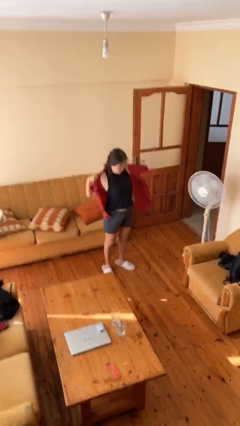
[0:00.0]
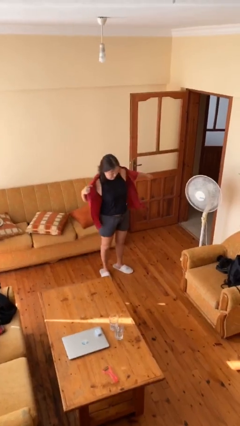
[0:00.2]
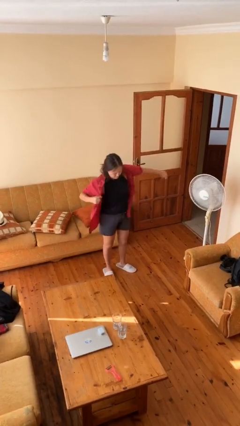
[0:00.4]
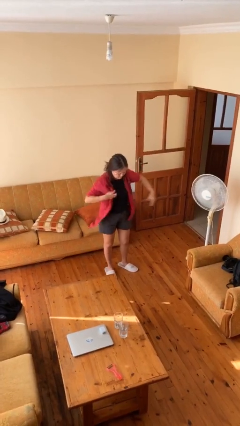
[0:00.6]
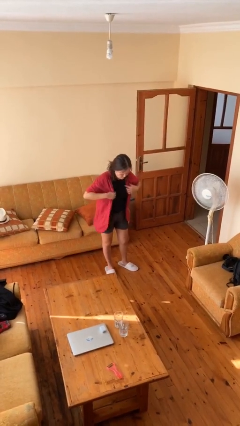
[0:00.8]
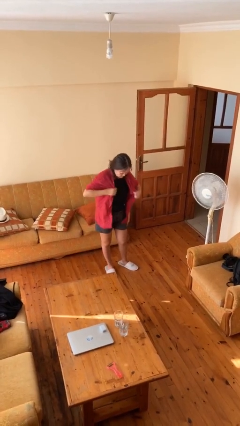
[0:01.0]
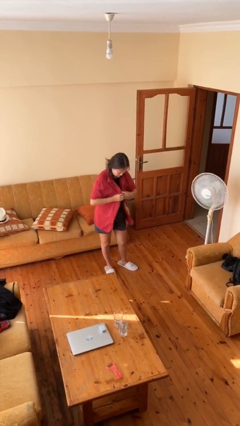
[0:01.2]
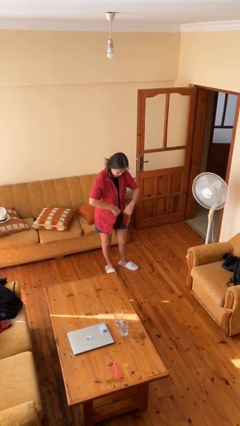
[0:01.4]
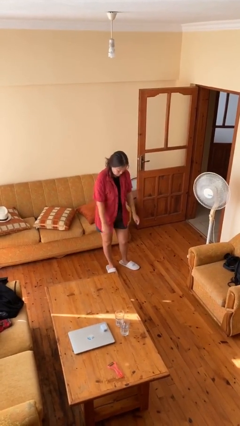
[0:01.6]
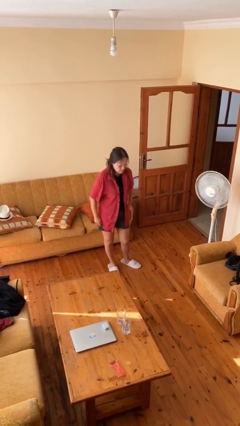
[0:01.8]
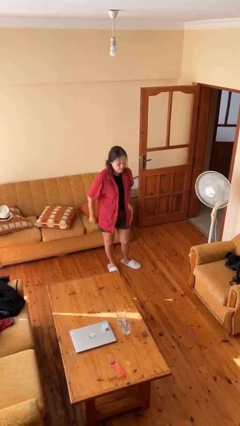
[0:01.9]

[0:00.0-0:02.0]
person puts on shirt

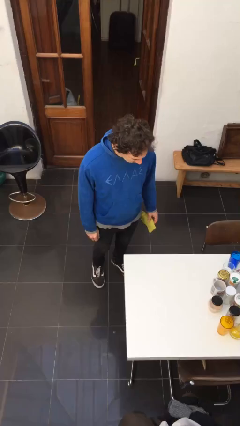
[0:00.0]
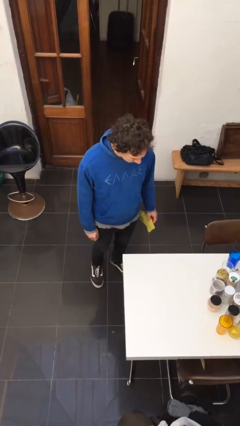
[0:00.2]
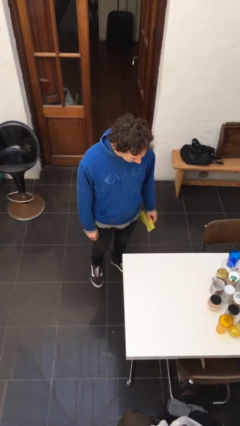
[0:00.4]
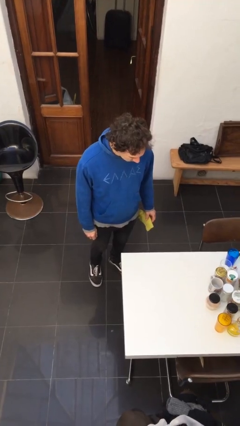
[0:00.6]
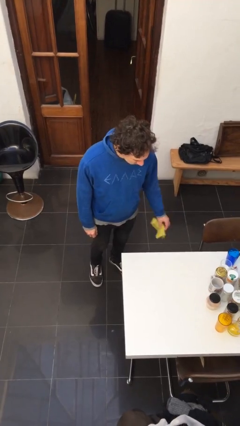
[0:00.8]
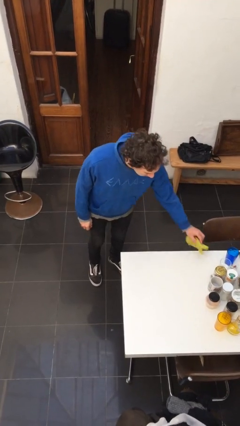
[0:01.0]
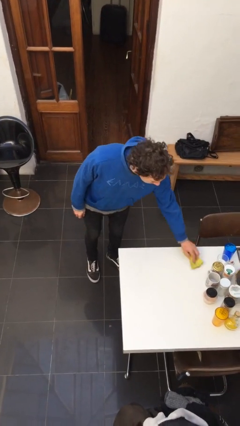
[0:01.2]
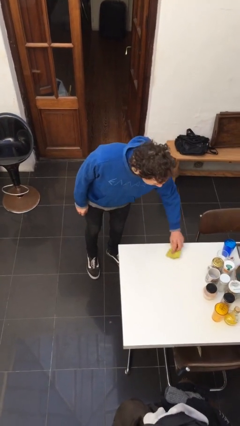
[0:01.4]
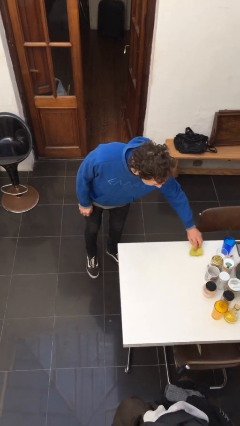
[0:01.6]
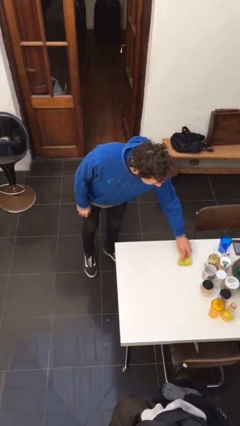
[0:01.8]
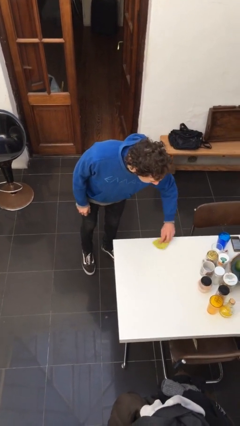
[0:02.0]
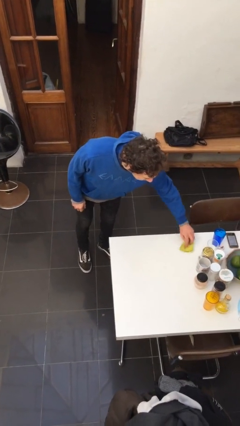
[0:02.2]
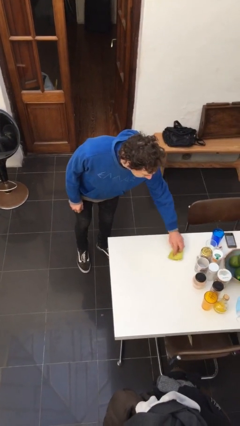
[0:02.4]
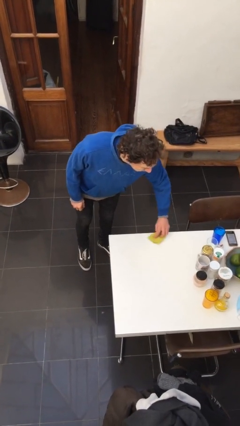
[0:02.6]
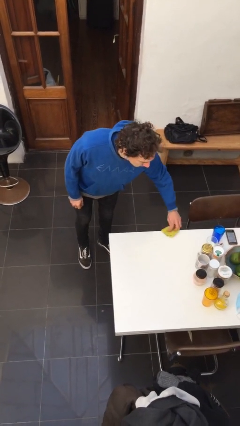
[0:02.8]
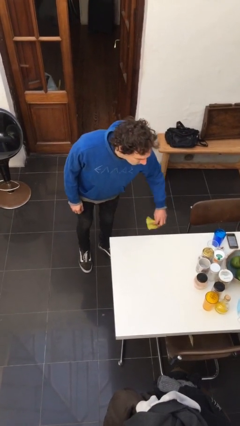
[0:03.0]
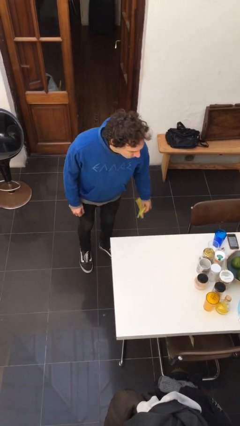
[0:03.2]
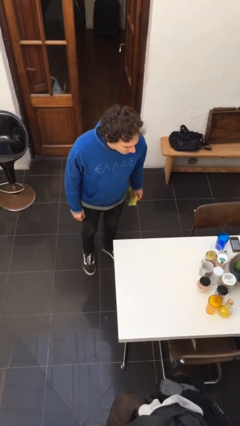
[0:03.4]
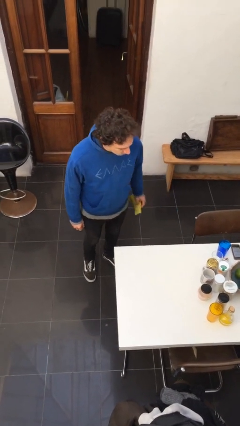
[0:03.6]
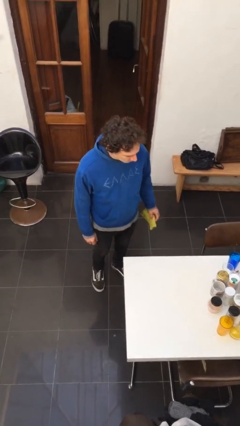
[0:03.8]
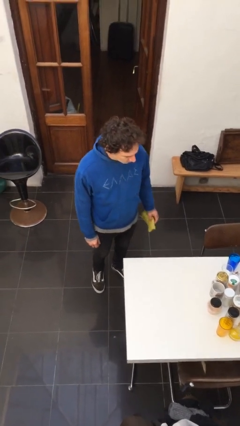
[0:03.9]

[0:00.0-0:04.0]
person cleans table with rag

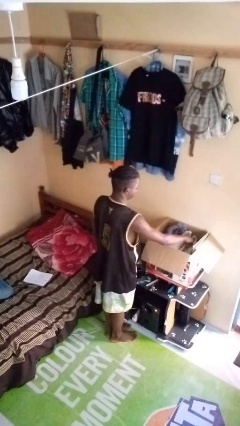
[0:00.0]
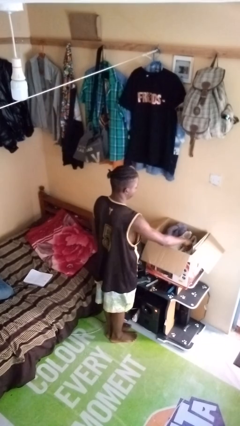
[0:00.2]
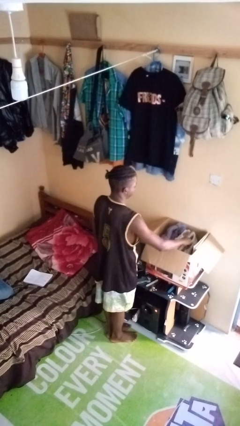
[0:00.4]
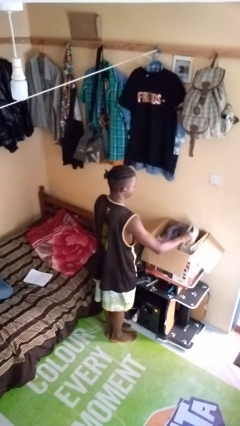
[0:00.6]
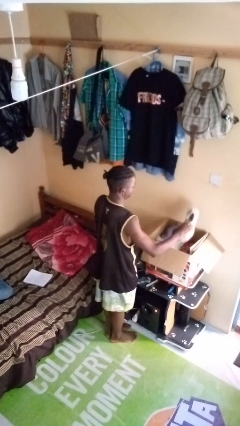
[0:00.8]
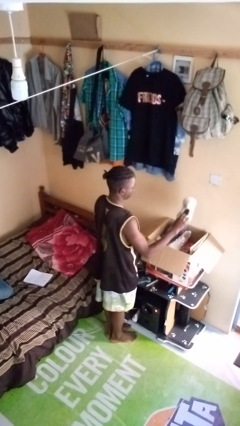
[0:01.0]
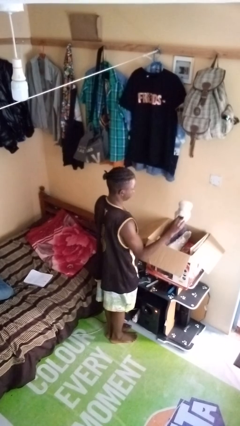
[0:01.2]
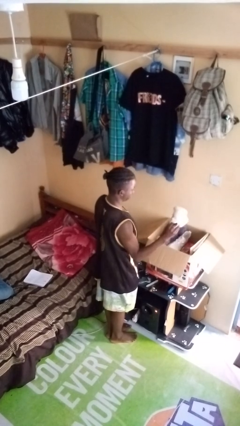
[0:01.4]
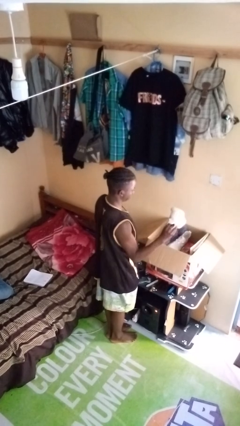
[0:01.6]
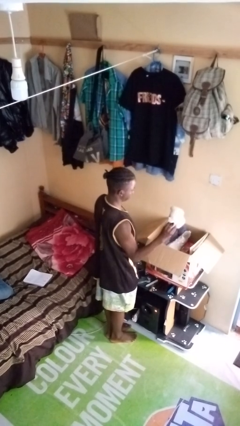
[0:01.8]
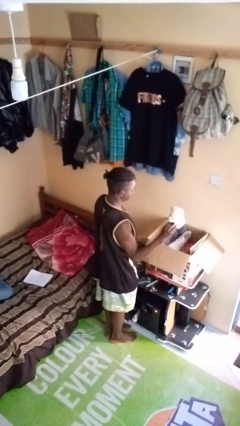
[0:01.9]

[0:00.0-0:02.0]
person takes object from box

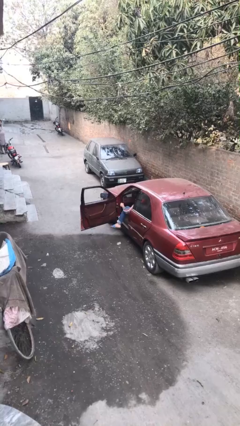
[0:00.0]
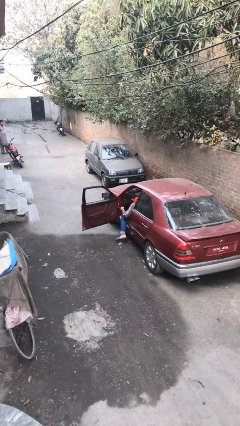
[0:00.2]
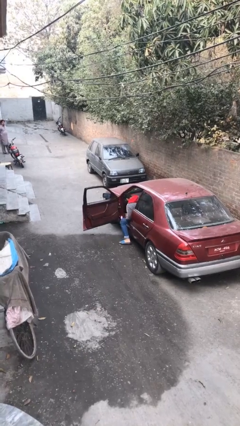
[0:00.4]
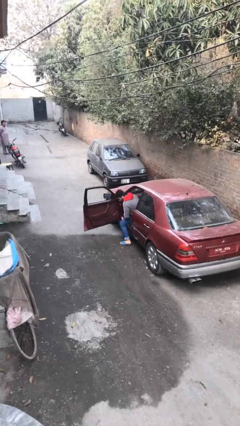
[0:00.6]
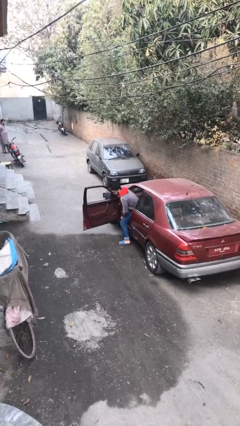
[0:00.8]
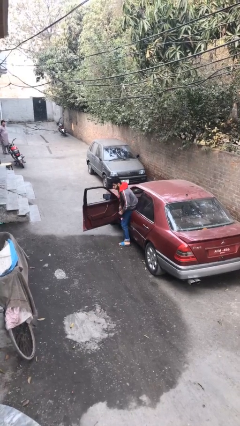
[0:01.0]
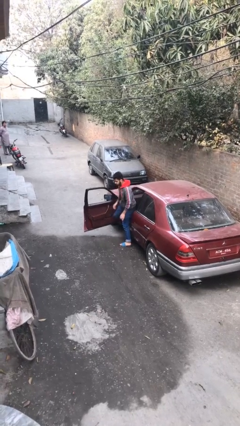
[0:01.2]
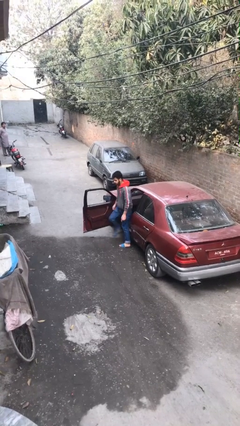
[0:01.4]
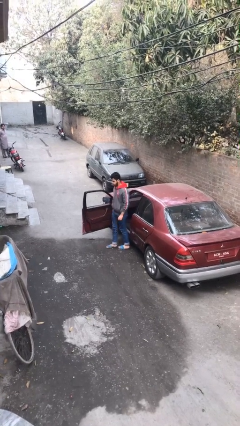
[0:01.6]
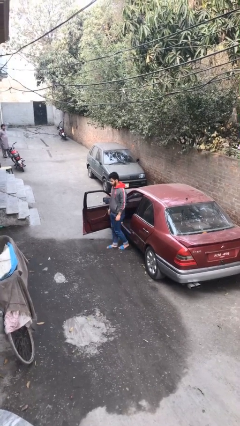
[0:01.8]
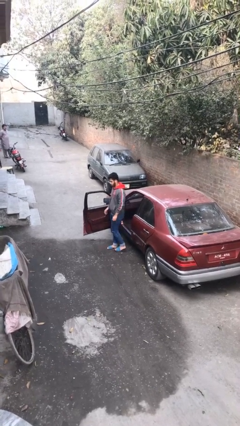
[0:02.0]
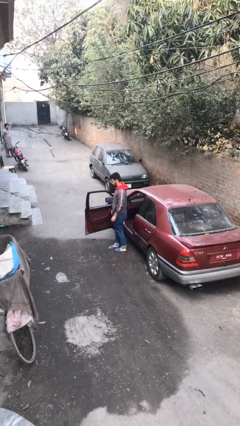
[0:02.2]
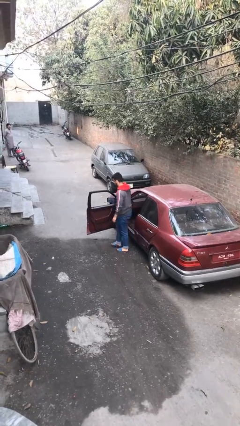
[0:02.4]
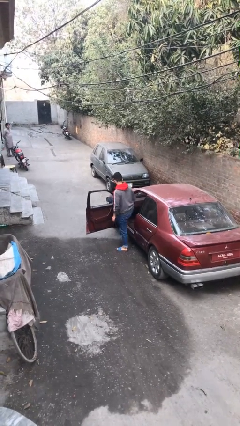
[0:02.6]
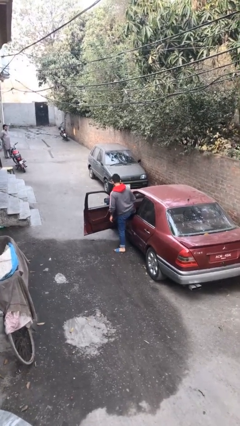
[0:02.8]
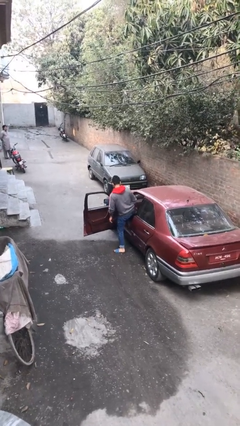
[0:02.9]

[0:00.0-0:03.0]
person exits car

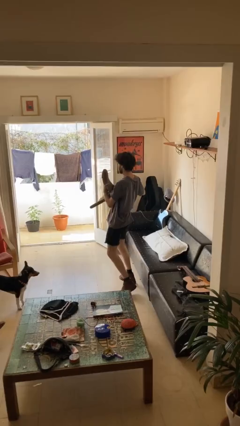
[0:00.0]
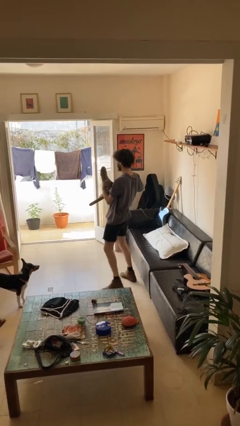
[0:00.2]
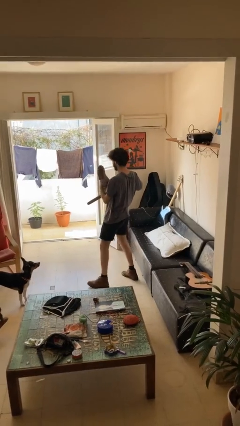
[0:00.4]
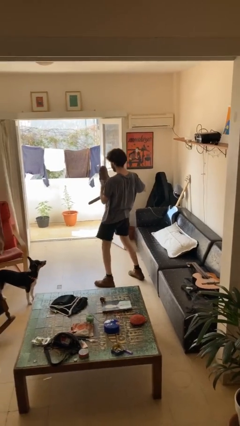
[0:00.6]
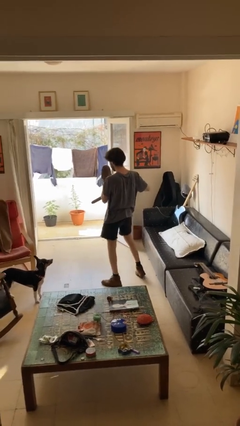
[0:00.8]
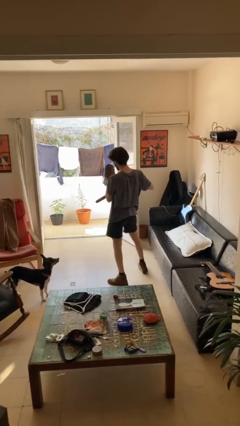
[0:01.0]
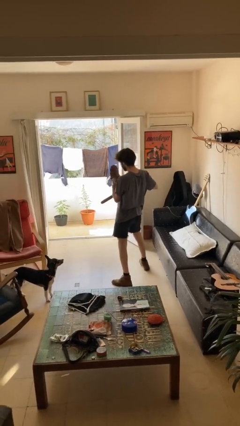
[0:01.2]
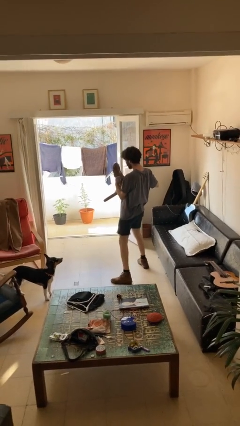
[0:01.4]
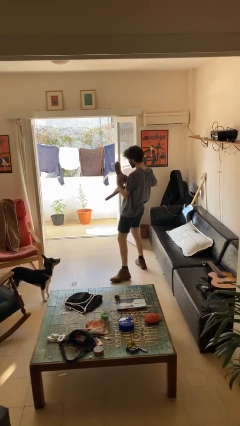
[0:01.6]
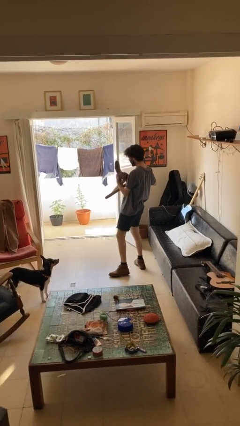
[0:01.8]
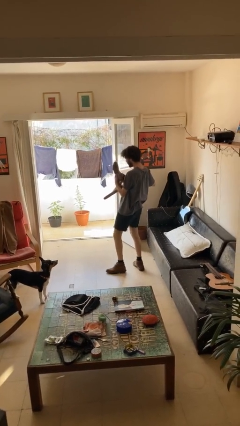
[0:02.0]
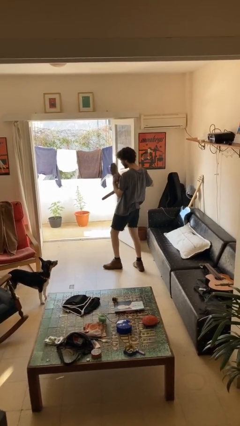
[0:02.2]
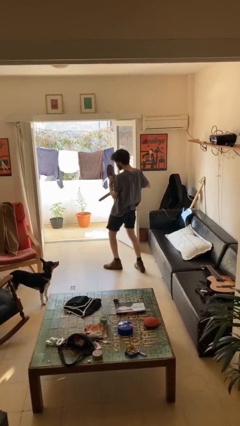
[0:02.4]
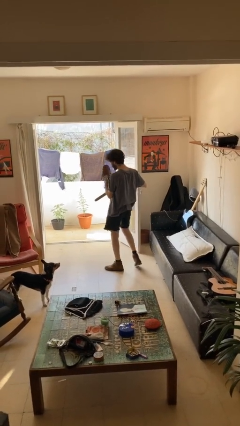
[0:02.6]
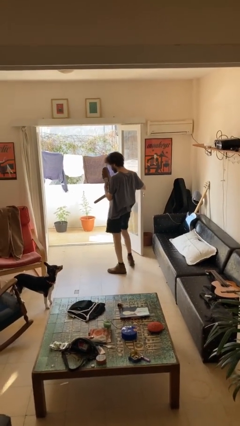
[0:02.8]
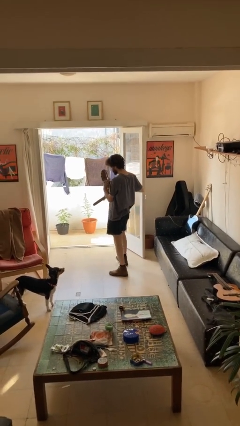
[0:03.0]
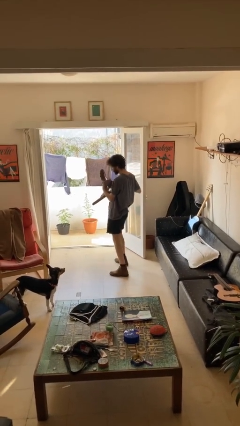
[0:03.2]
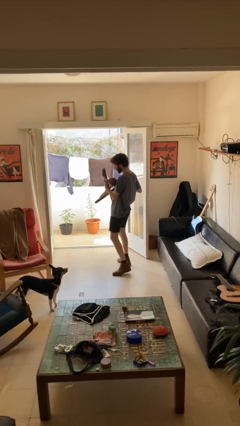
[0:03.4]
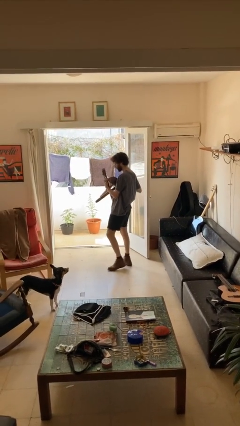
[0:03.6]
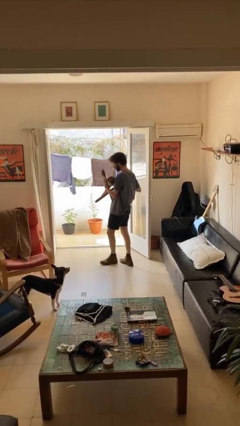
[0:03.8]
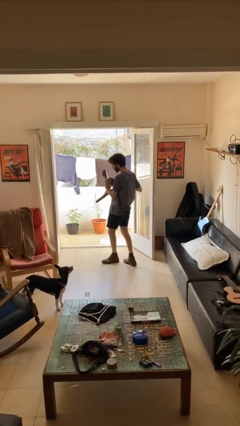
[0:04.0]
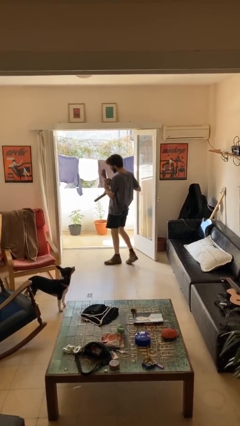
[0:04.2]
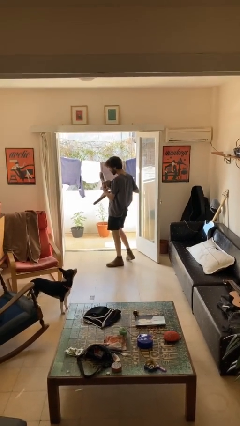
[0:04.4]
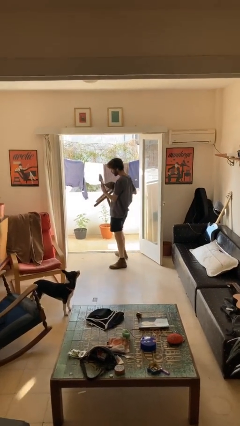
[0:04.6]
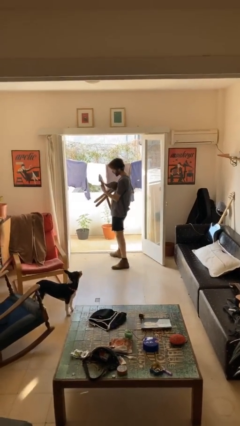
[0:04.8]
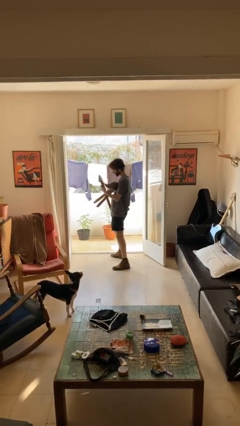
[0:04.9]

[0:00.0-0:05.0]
person carries heavy object

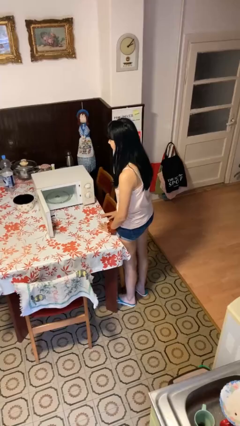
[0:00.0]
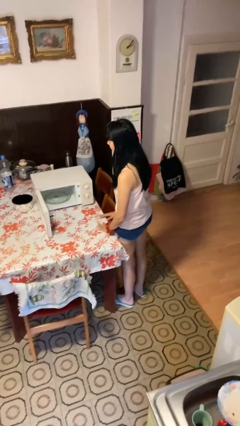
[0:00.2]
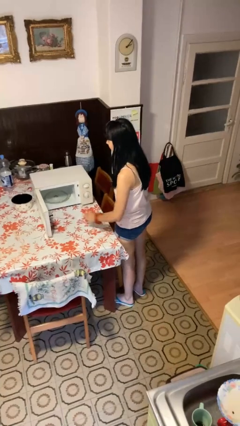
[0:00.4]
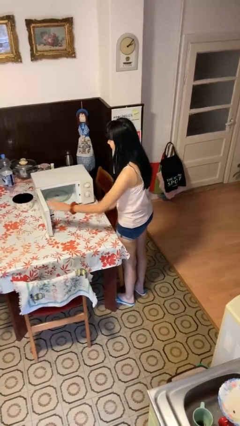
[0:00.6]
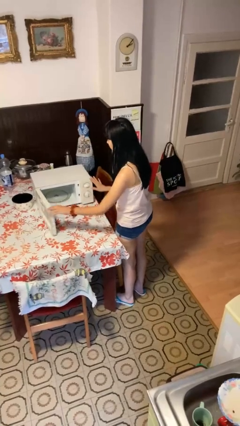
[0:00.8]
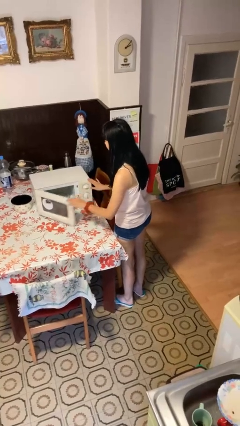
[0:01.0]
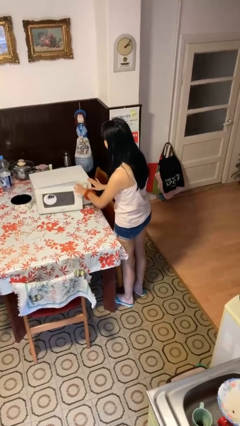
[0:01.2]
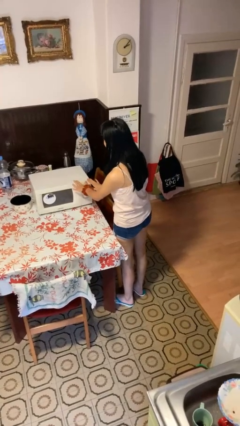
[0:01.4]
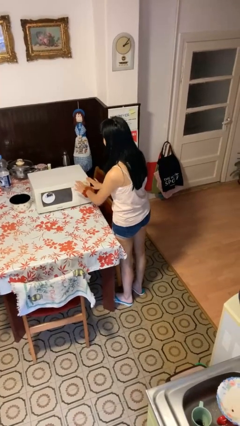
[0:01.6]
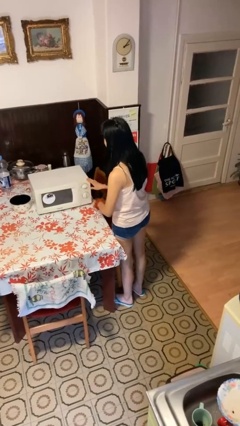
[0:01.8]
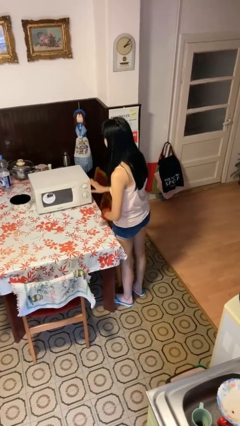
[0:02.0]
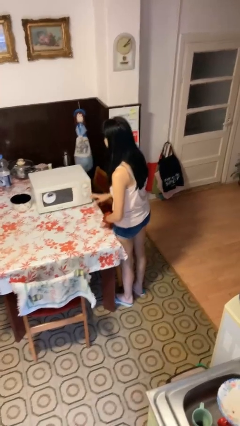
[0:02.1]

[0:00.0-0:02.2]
person closes microwave
